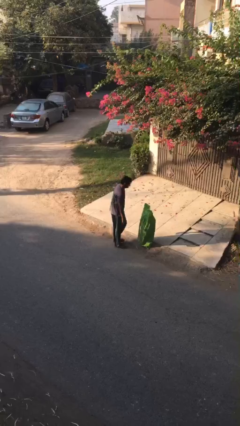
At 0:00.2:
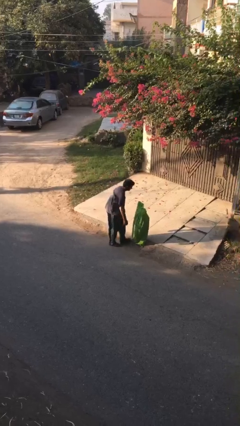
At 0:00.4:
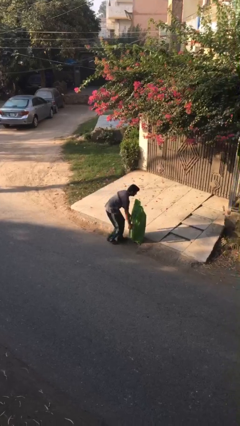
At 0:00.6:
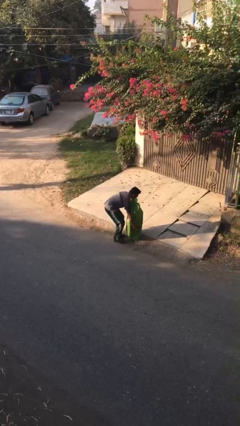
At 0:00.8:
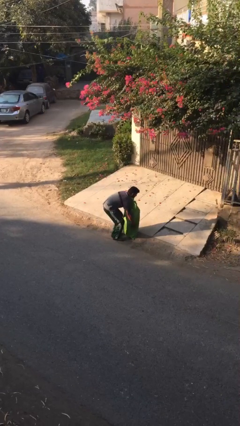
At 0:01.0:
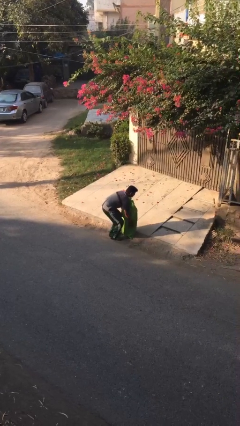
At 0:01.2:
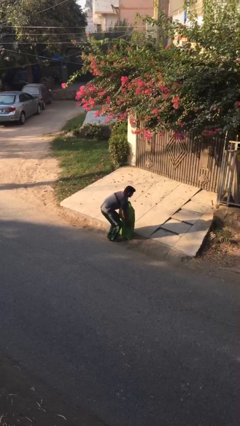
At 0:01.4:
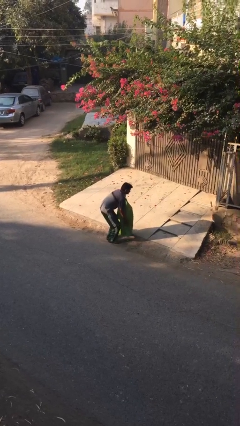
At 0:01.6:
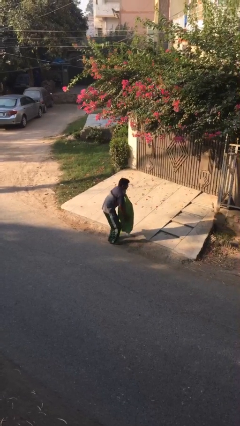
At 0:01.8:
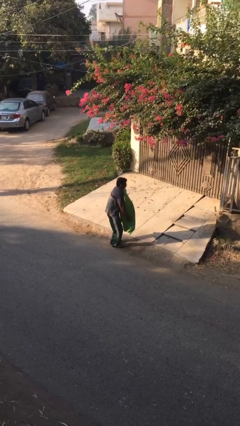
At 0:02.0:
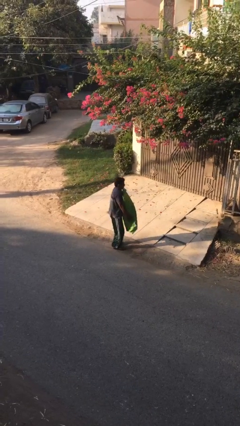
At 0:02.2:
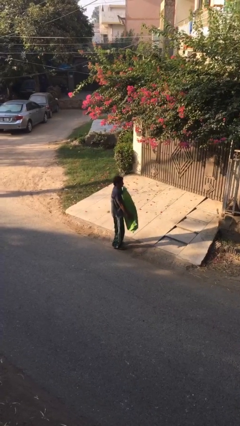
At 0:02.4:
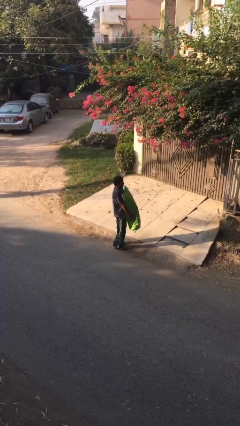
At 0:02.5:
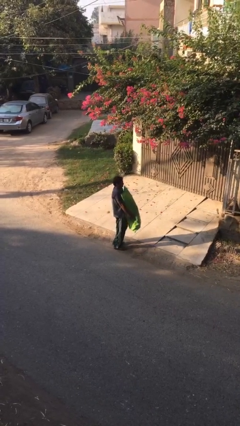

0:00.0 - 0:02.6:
person picks up object from floor

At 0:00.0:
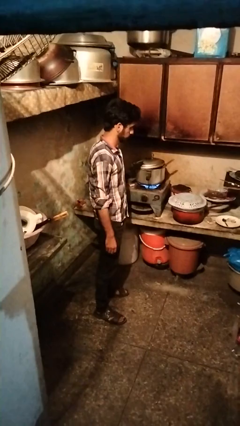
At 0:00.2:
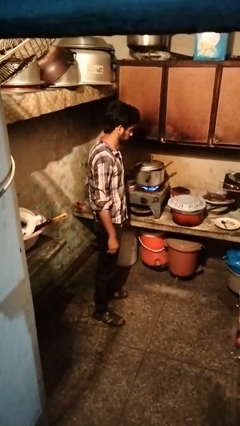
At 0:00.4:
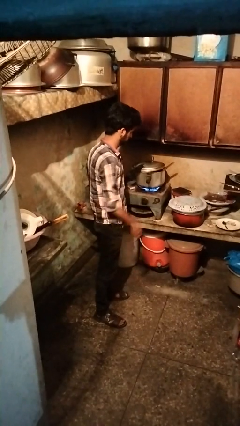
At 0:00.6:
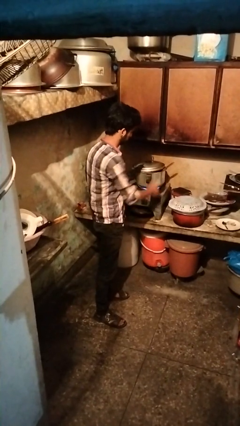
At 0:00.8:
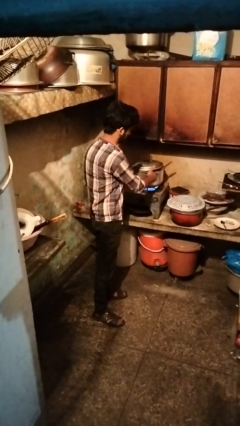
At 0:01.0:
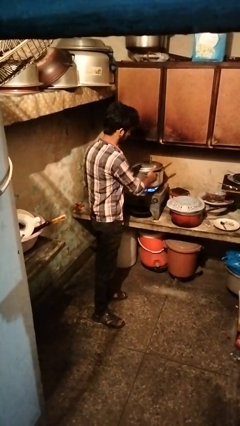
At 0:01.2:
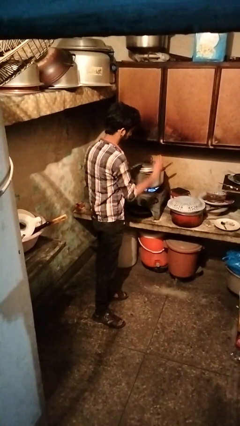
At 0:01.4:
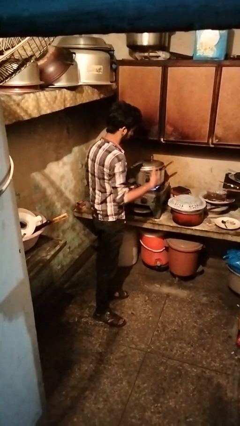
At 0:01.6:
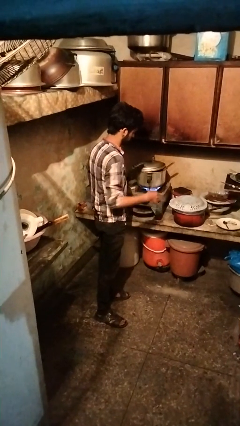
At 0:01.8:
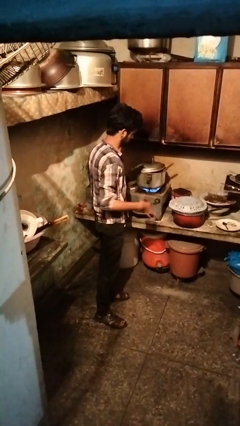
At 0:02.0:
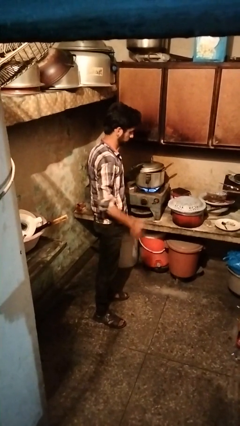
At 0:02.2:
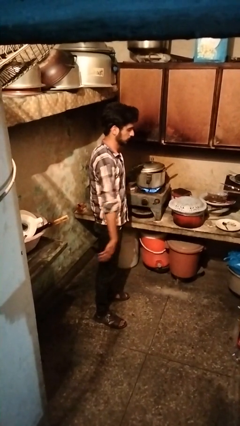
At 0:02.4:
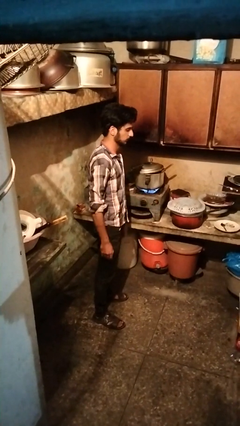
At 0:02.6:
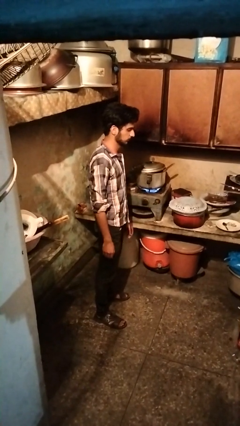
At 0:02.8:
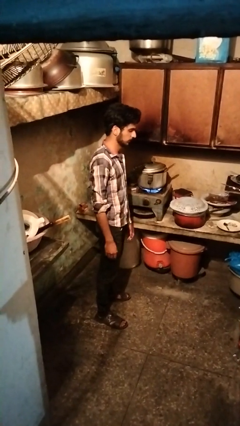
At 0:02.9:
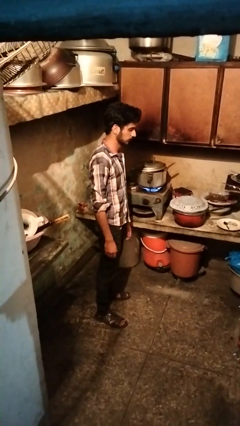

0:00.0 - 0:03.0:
person burns hand

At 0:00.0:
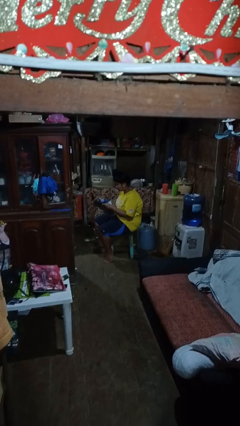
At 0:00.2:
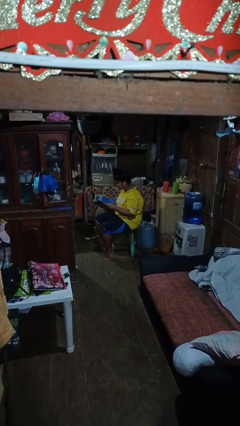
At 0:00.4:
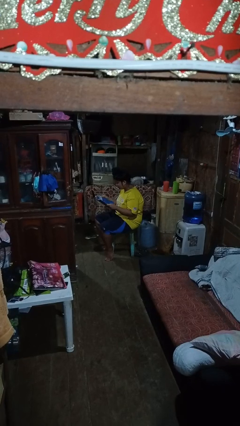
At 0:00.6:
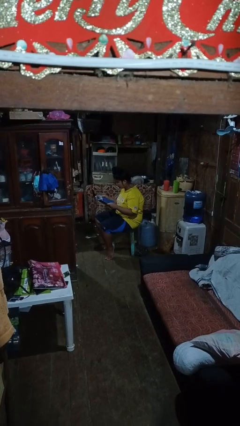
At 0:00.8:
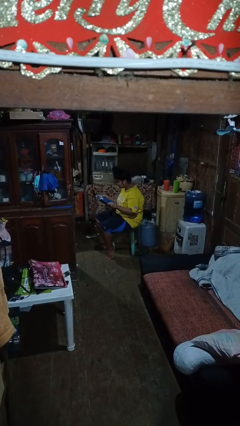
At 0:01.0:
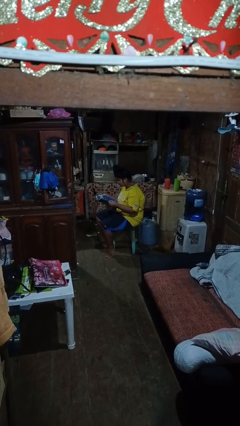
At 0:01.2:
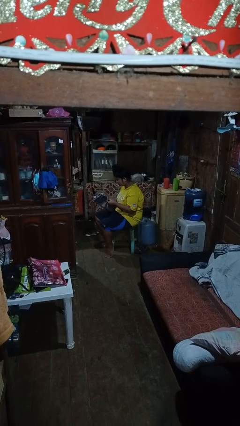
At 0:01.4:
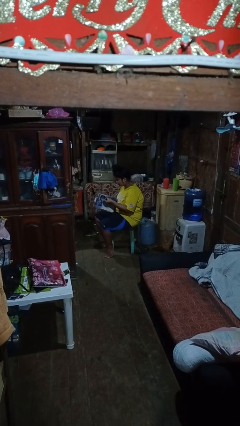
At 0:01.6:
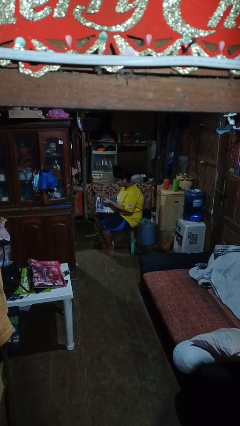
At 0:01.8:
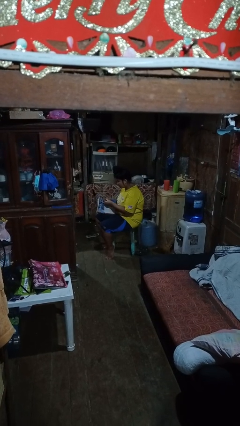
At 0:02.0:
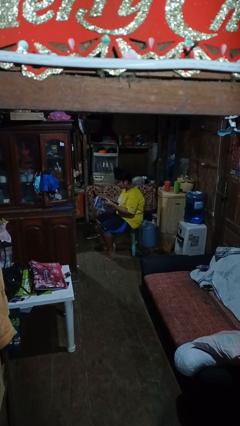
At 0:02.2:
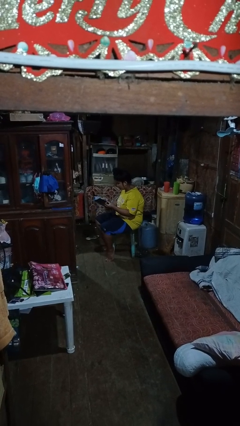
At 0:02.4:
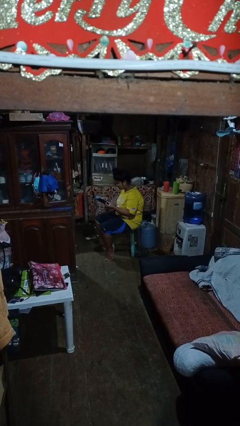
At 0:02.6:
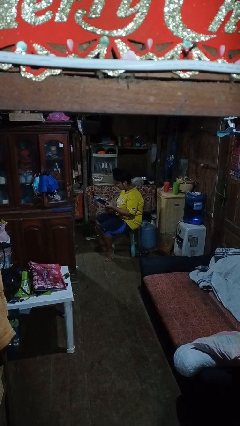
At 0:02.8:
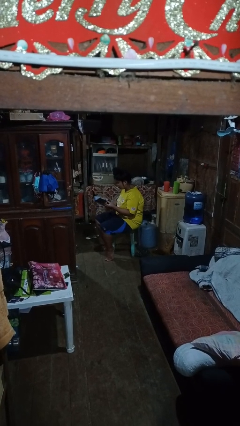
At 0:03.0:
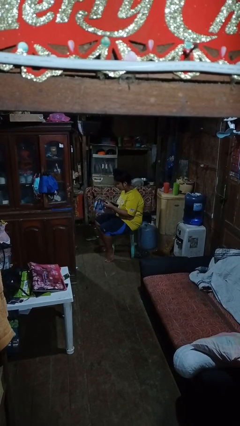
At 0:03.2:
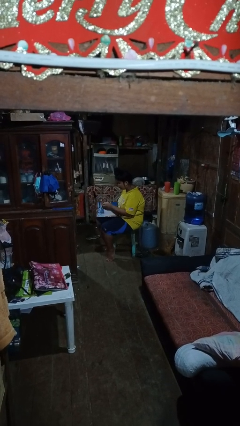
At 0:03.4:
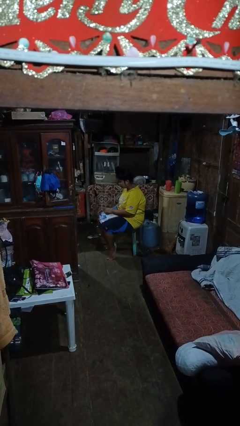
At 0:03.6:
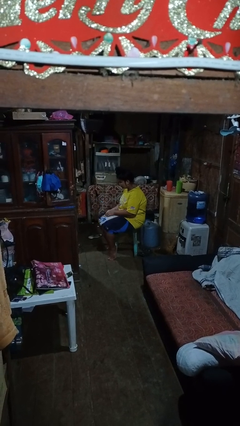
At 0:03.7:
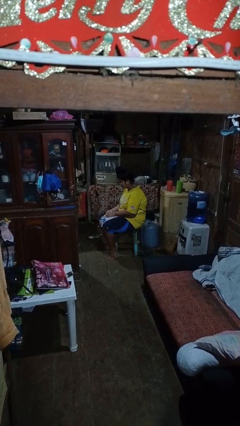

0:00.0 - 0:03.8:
person reads magazine

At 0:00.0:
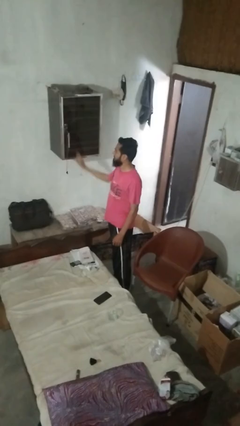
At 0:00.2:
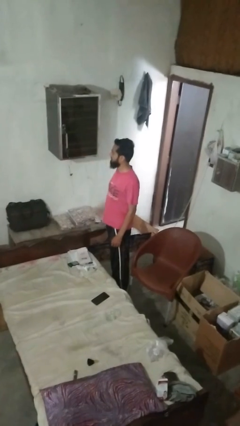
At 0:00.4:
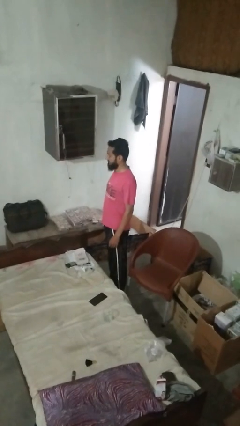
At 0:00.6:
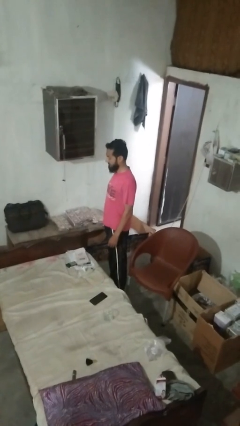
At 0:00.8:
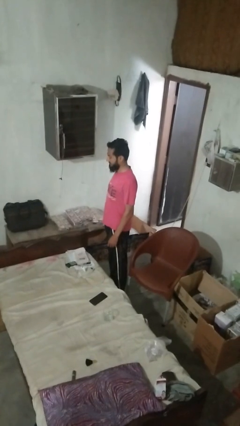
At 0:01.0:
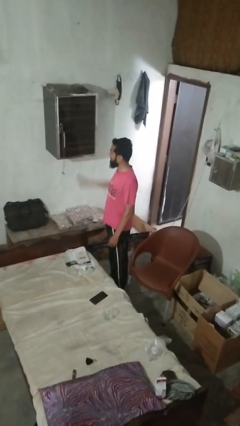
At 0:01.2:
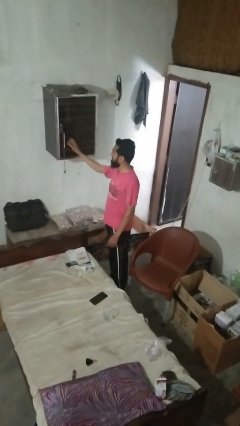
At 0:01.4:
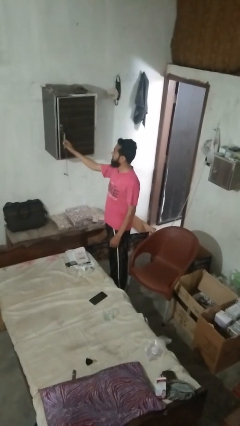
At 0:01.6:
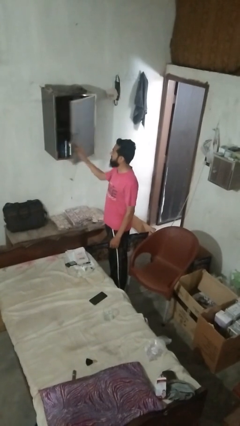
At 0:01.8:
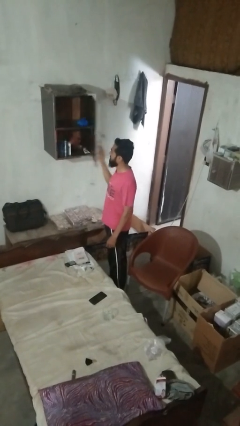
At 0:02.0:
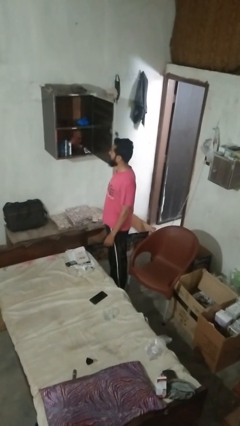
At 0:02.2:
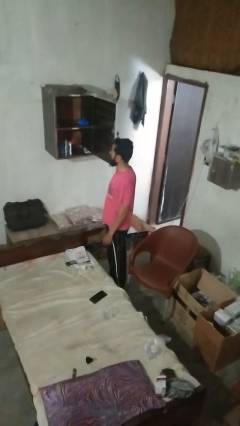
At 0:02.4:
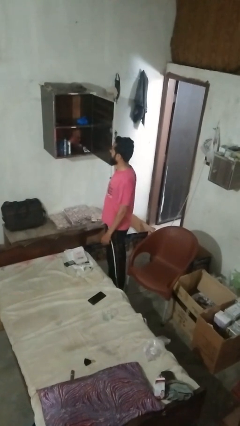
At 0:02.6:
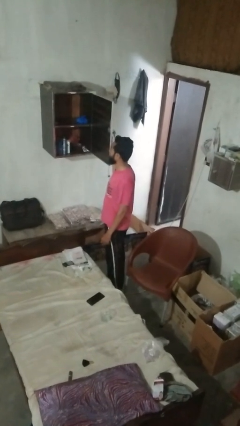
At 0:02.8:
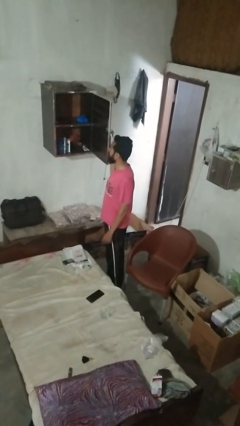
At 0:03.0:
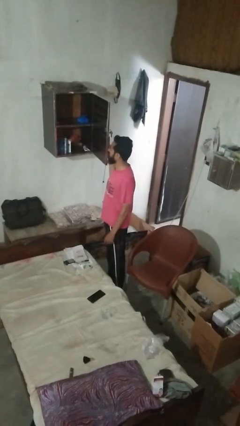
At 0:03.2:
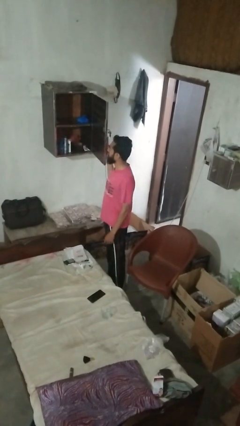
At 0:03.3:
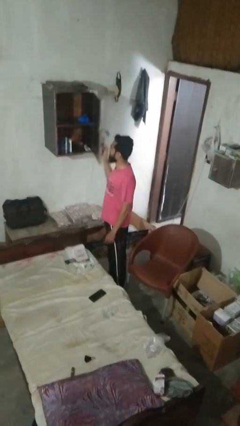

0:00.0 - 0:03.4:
person opens dresser drawer

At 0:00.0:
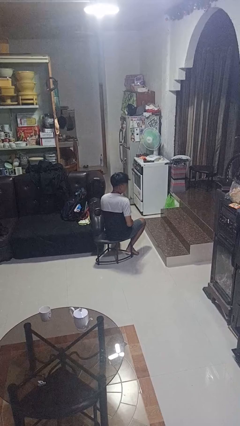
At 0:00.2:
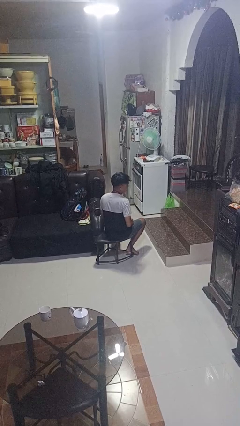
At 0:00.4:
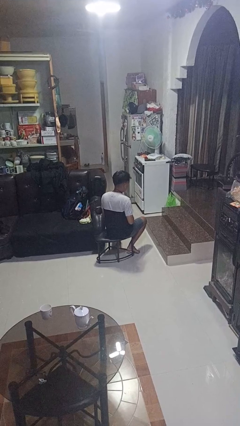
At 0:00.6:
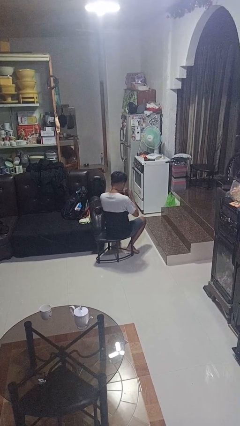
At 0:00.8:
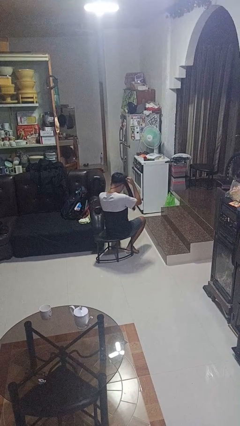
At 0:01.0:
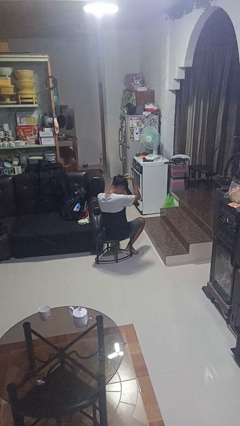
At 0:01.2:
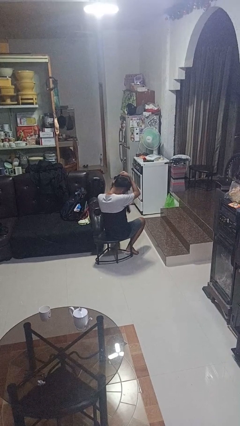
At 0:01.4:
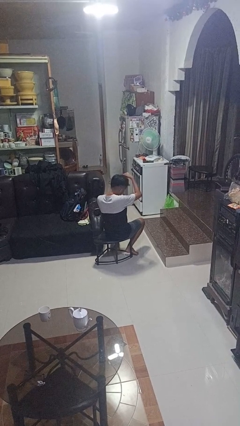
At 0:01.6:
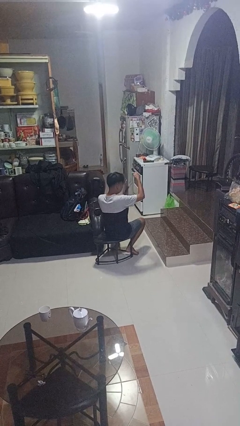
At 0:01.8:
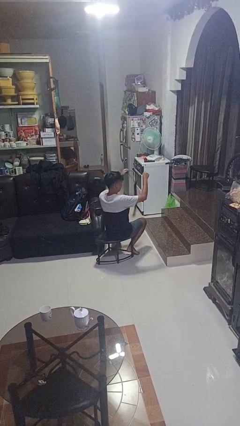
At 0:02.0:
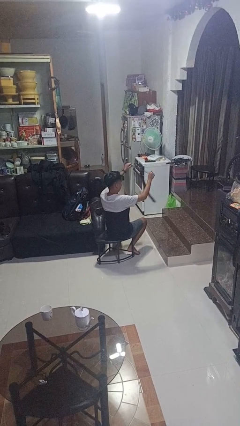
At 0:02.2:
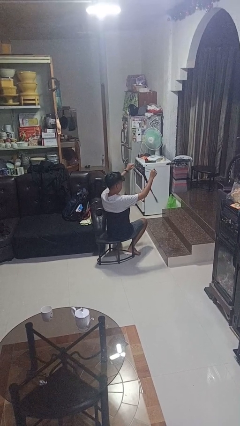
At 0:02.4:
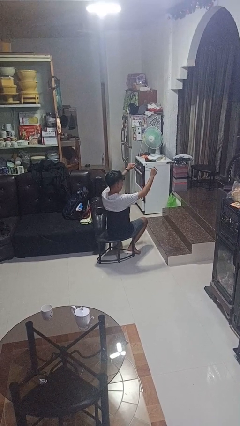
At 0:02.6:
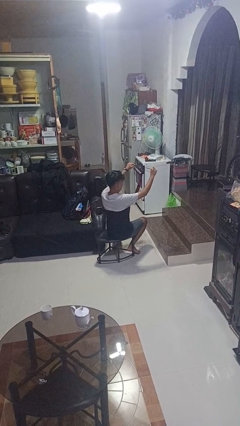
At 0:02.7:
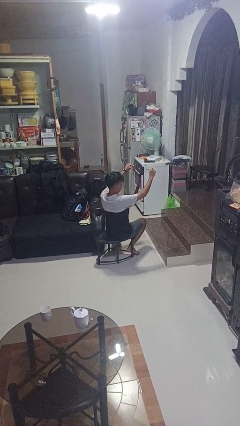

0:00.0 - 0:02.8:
person takes off necktie

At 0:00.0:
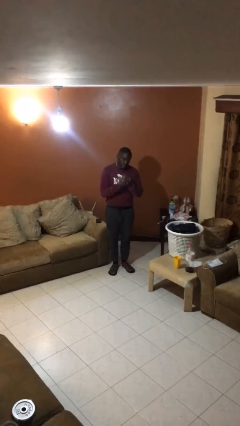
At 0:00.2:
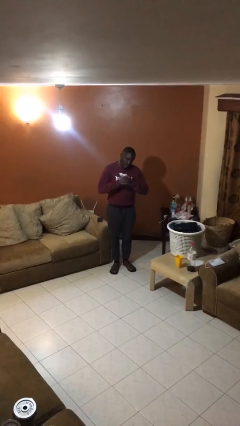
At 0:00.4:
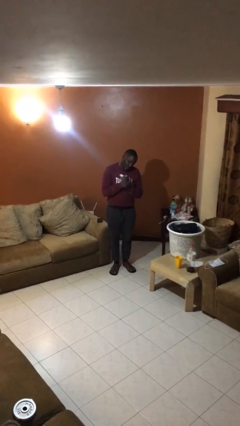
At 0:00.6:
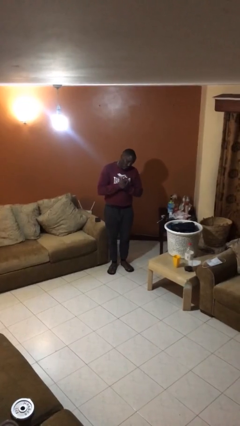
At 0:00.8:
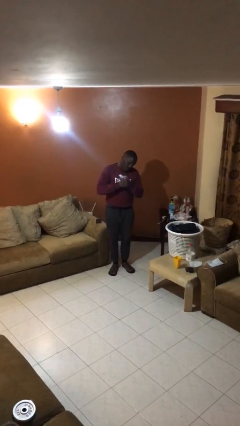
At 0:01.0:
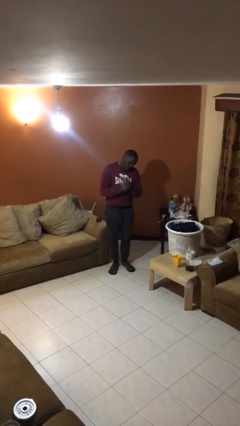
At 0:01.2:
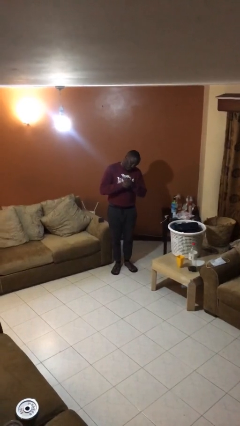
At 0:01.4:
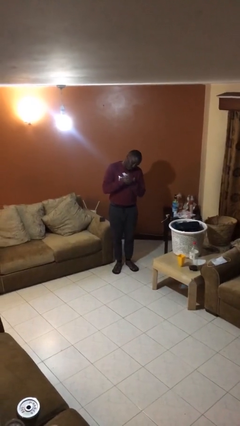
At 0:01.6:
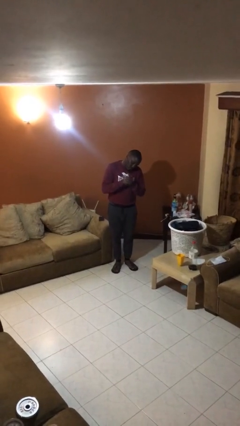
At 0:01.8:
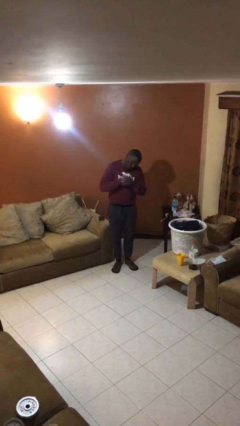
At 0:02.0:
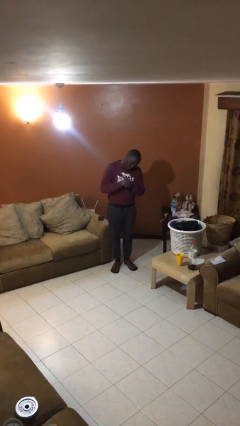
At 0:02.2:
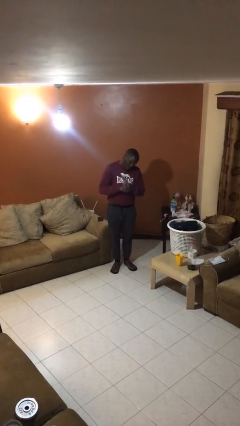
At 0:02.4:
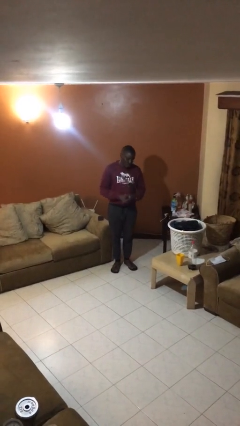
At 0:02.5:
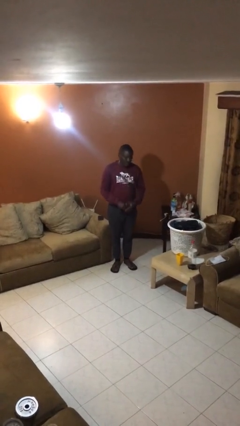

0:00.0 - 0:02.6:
person cracks knuckles
